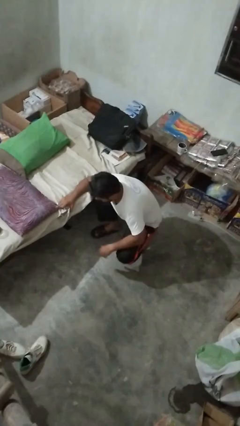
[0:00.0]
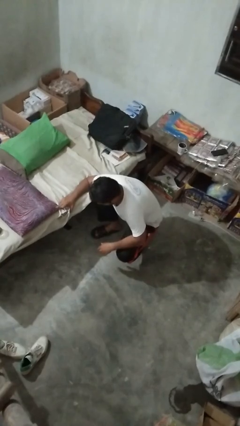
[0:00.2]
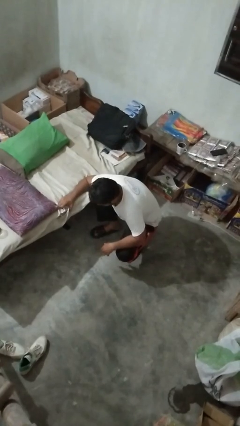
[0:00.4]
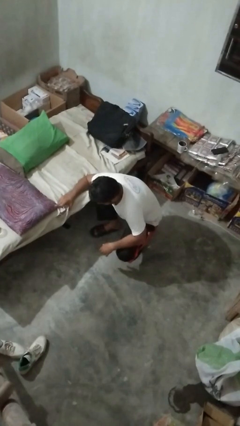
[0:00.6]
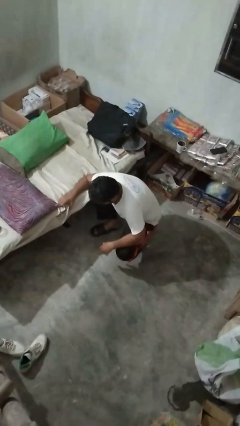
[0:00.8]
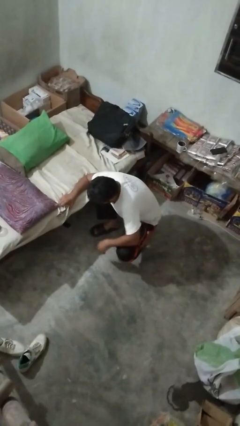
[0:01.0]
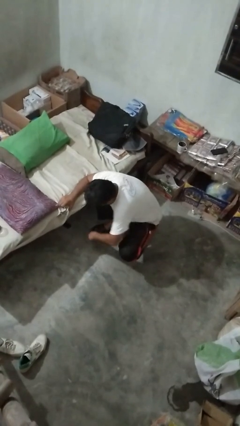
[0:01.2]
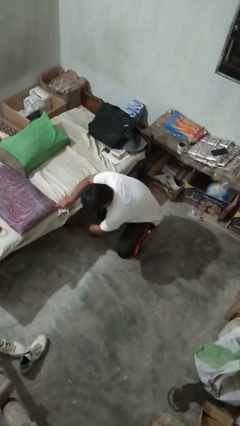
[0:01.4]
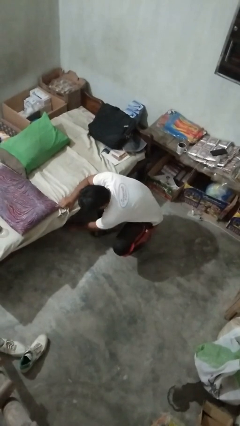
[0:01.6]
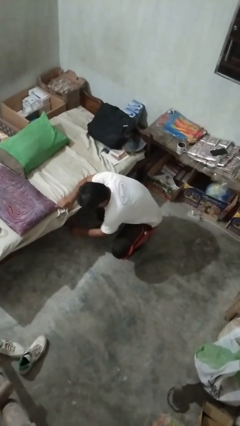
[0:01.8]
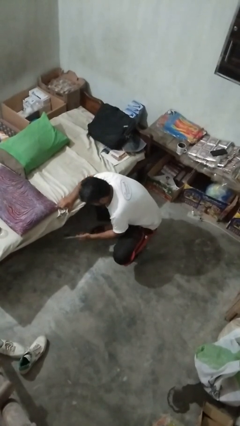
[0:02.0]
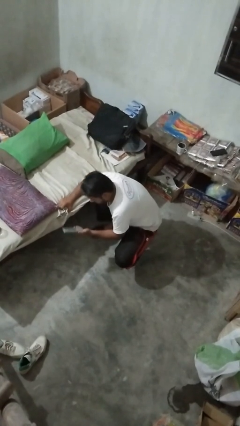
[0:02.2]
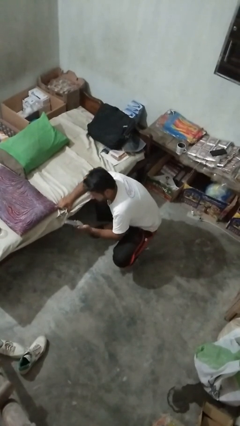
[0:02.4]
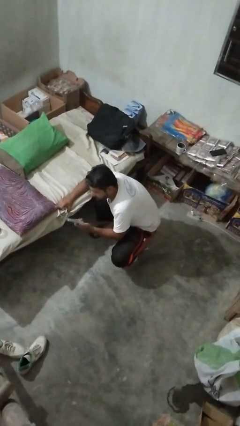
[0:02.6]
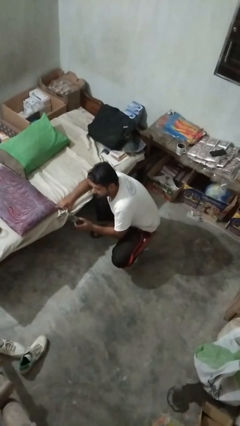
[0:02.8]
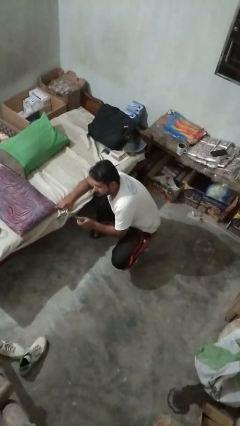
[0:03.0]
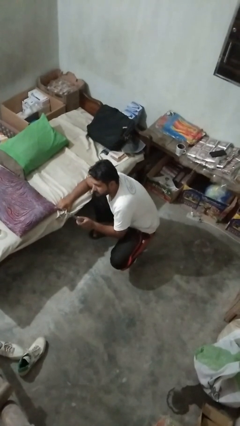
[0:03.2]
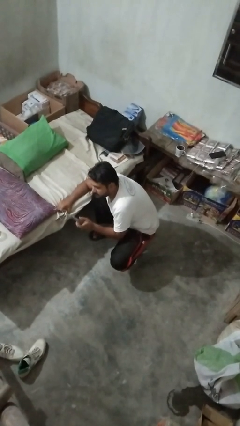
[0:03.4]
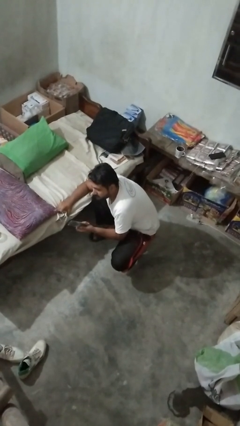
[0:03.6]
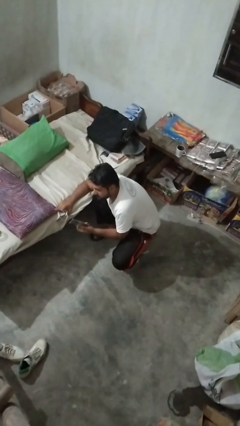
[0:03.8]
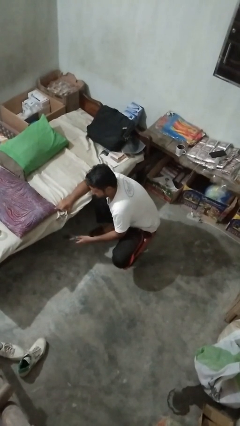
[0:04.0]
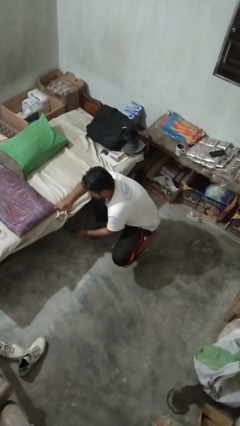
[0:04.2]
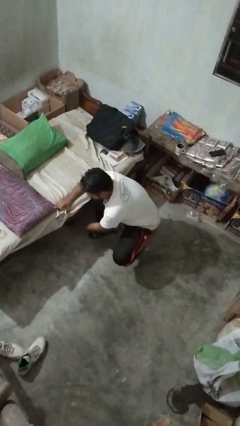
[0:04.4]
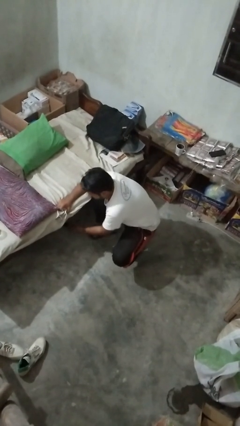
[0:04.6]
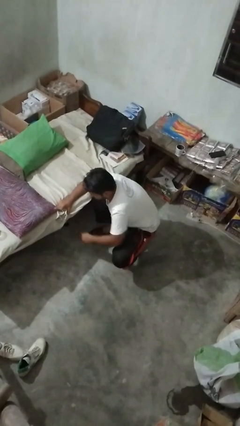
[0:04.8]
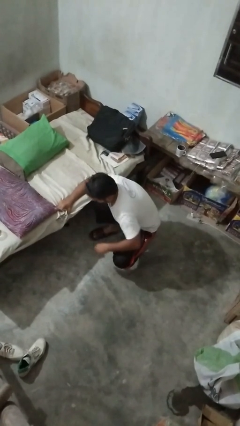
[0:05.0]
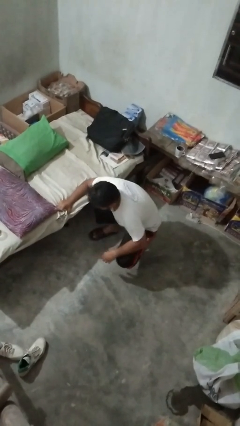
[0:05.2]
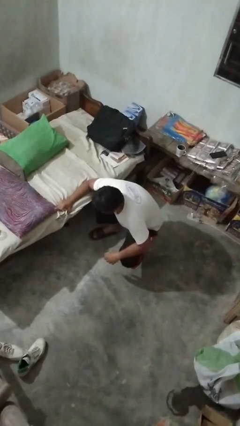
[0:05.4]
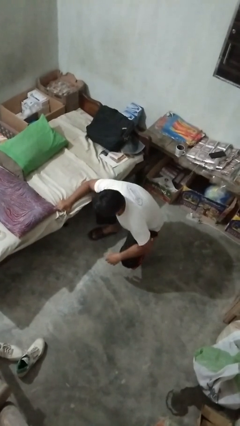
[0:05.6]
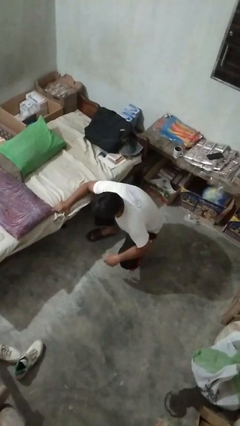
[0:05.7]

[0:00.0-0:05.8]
person searches under couch

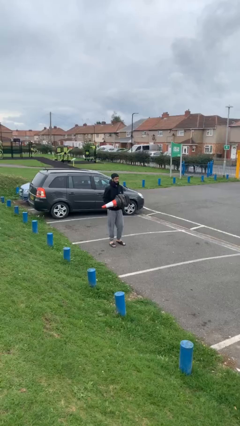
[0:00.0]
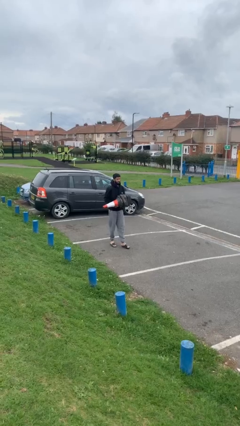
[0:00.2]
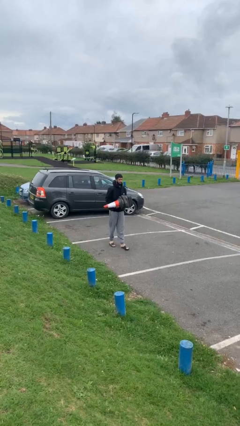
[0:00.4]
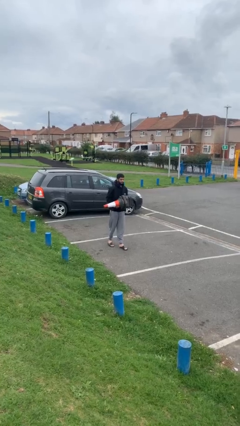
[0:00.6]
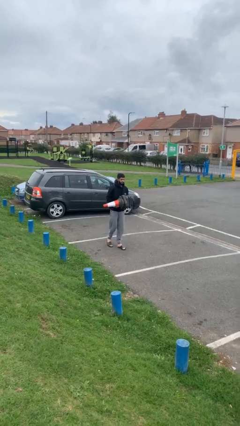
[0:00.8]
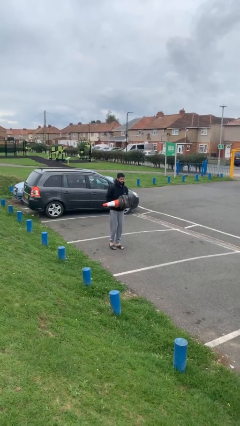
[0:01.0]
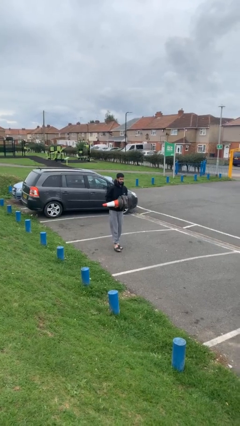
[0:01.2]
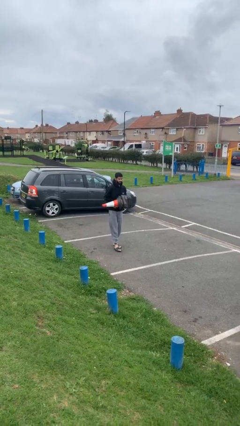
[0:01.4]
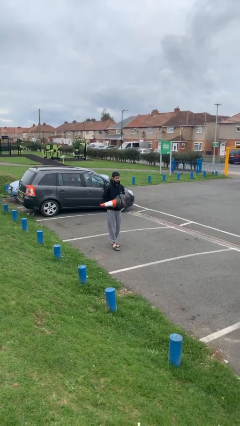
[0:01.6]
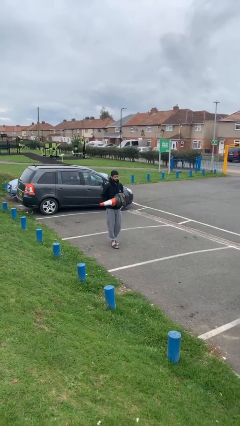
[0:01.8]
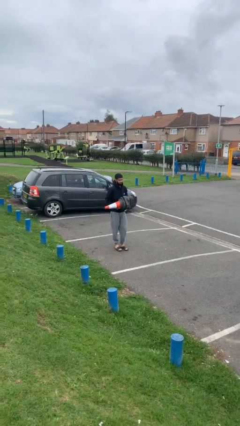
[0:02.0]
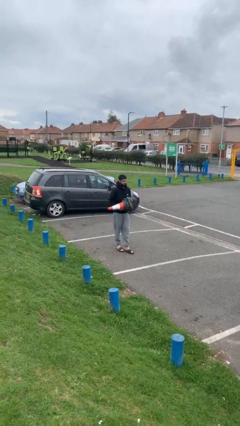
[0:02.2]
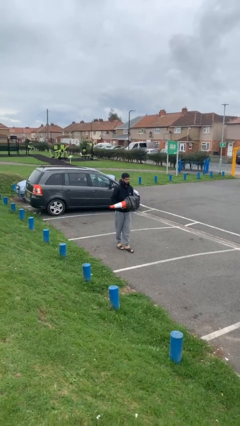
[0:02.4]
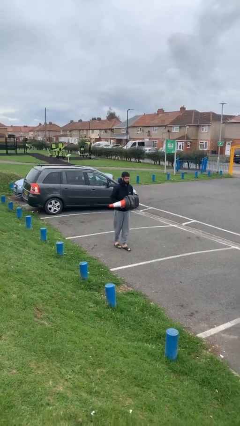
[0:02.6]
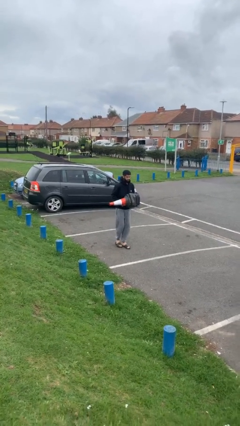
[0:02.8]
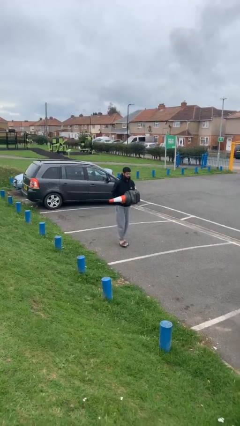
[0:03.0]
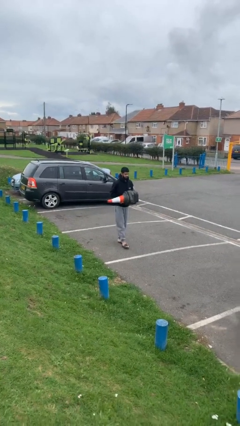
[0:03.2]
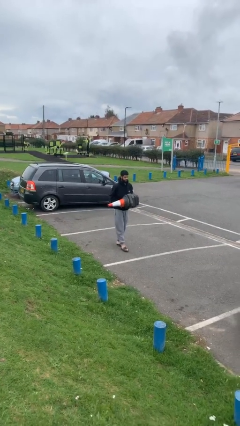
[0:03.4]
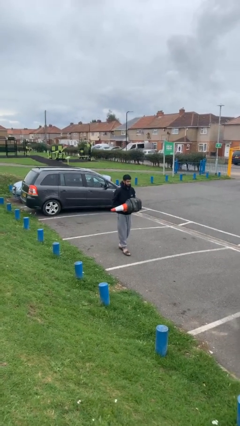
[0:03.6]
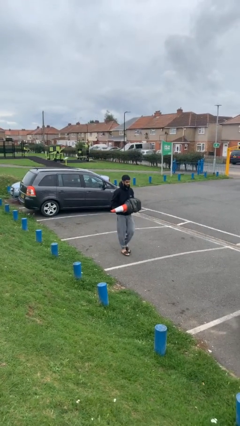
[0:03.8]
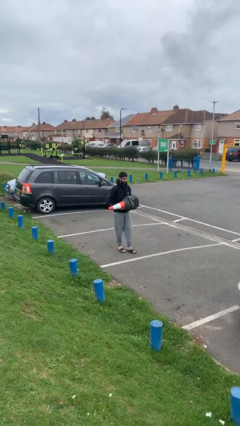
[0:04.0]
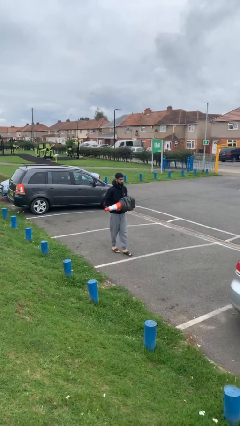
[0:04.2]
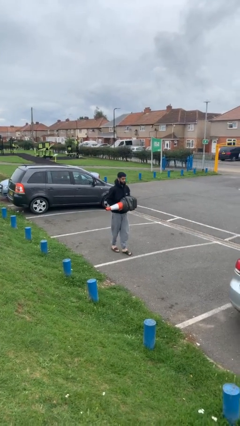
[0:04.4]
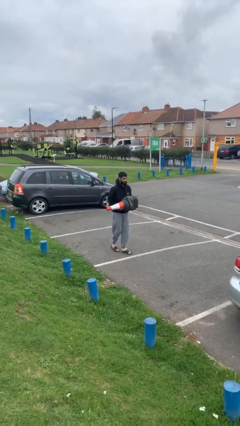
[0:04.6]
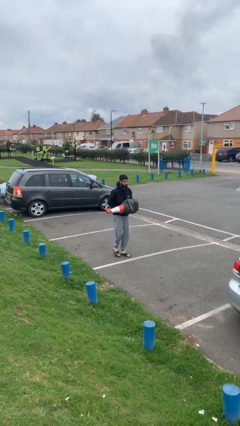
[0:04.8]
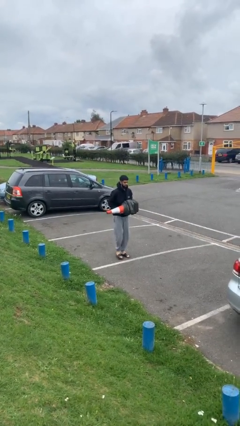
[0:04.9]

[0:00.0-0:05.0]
person carries heavy object

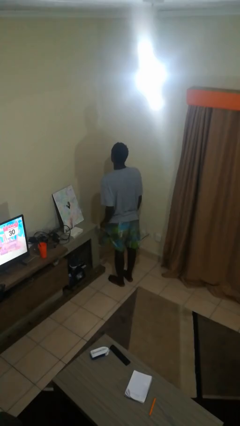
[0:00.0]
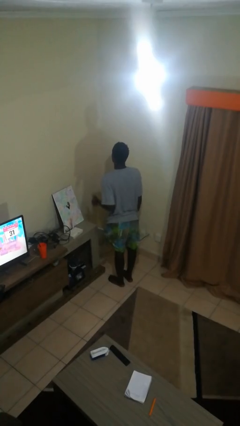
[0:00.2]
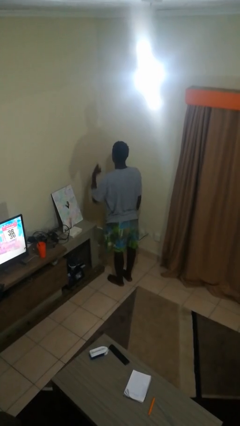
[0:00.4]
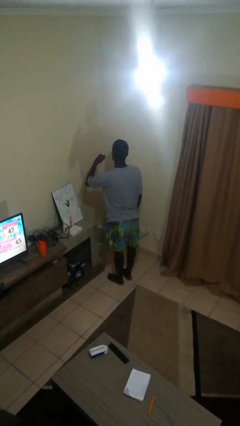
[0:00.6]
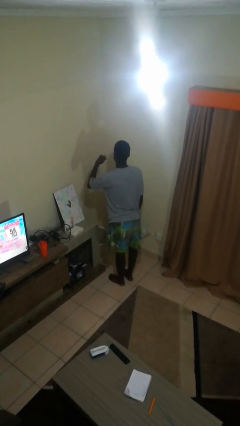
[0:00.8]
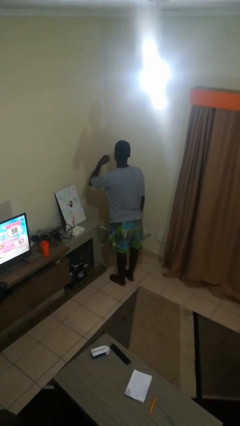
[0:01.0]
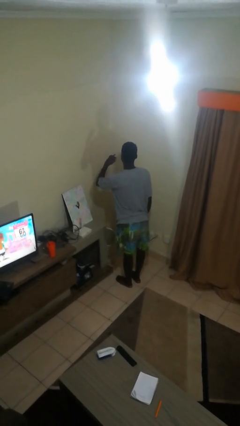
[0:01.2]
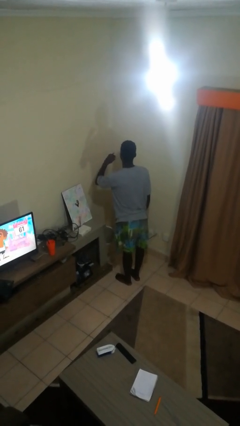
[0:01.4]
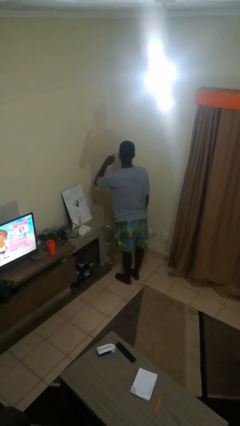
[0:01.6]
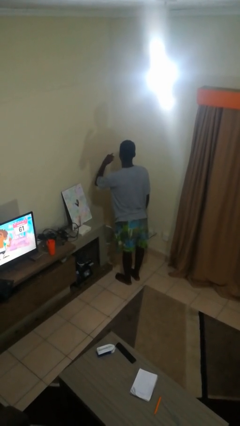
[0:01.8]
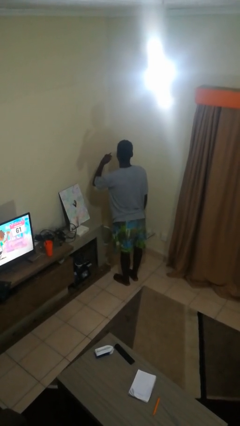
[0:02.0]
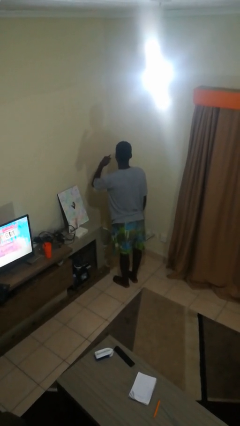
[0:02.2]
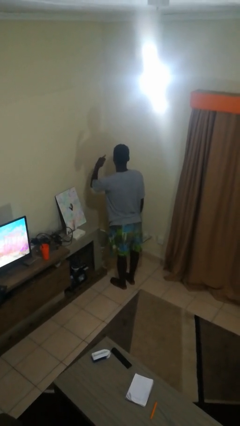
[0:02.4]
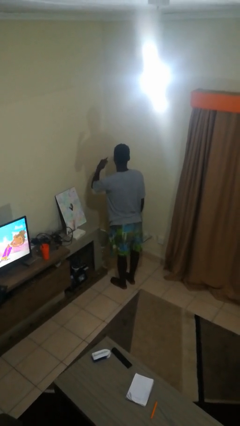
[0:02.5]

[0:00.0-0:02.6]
person gestures call me

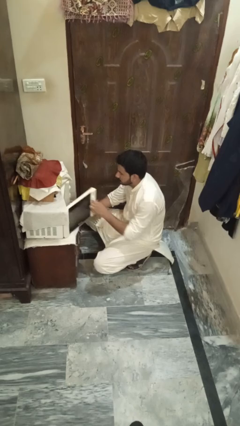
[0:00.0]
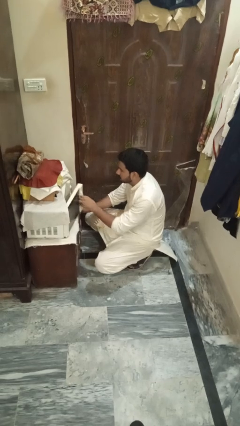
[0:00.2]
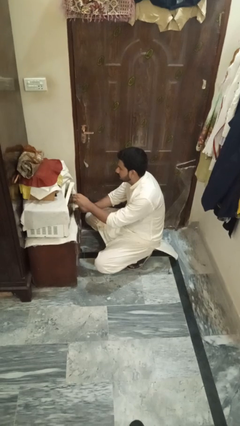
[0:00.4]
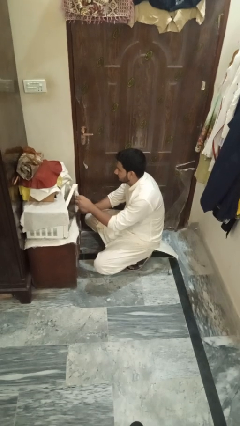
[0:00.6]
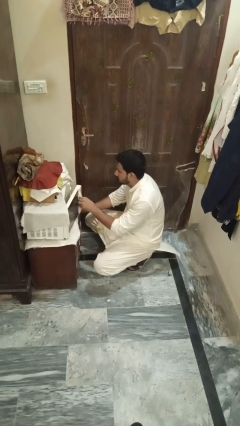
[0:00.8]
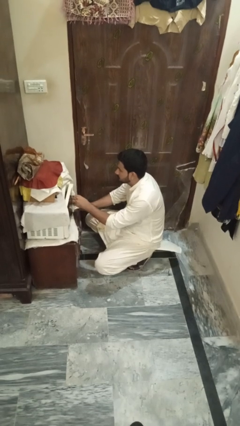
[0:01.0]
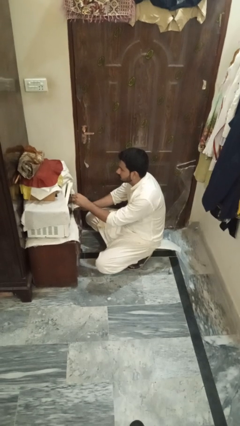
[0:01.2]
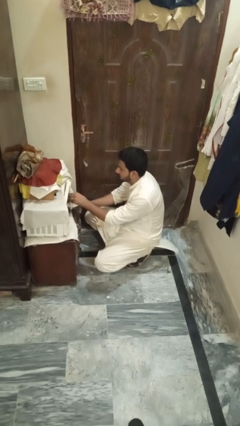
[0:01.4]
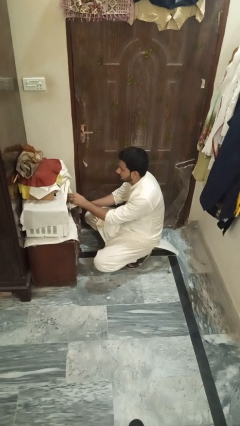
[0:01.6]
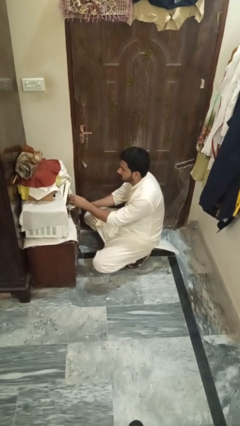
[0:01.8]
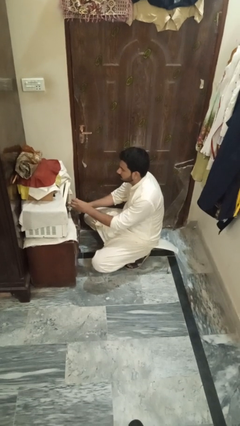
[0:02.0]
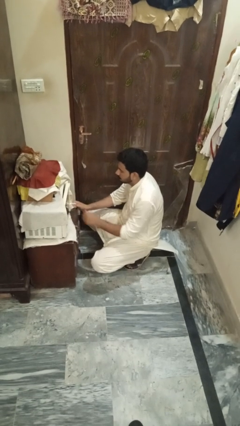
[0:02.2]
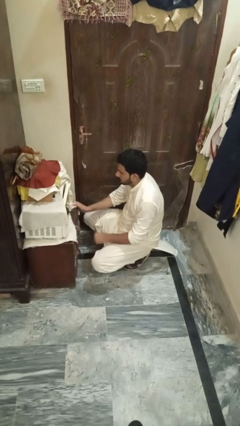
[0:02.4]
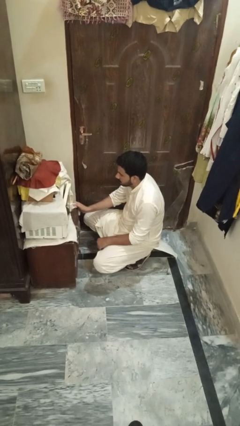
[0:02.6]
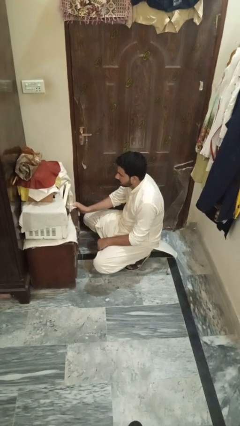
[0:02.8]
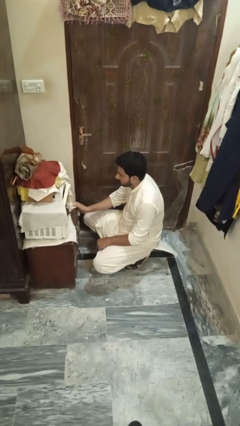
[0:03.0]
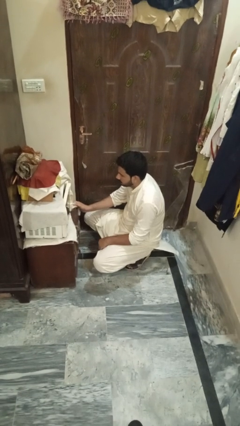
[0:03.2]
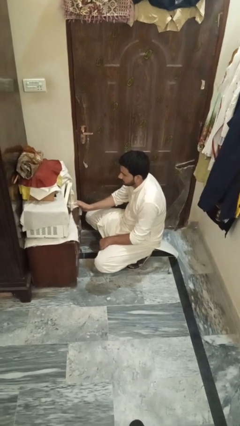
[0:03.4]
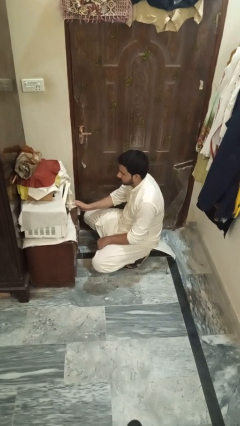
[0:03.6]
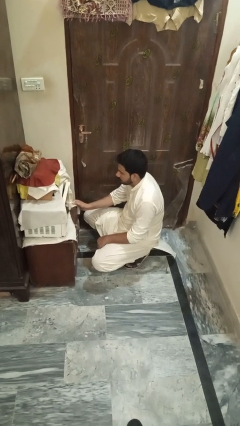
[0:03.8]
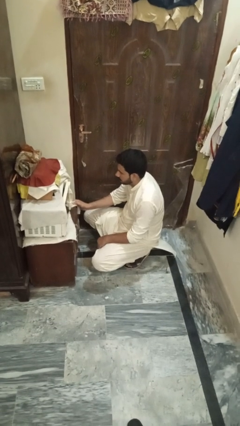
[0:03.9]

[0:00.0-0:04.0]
person closes microwave

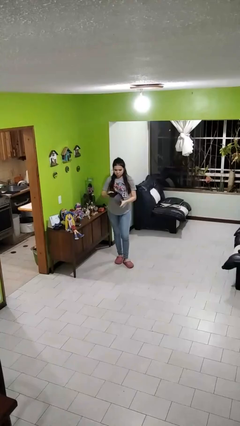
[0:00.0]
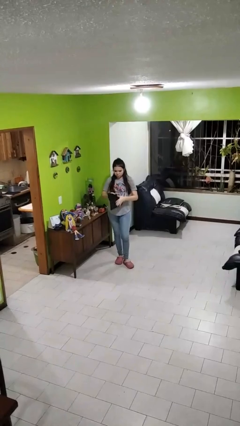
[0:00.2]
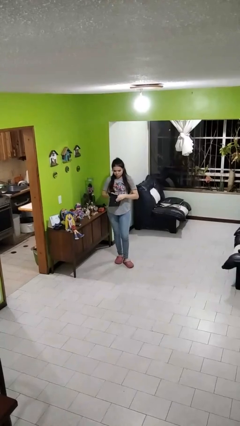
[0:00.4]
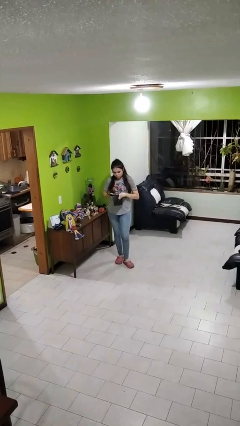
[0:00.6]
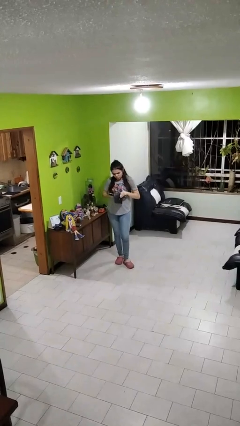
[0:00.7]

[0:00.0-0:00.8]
person searches in purse
